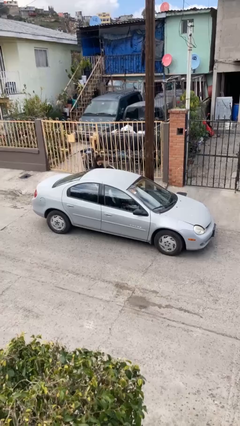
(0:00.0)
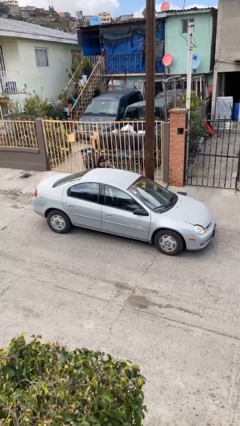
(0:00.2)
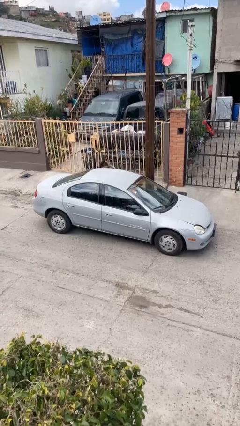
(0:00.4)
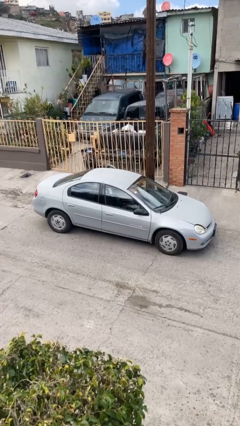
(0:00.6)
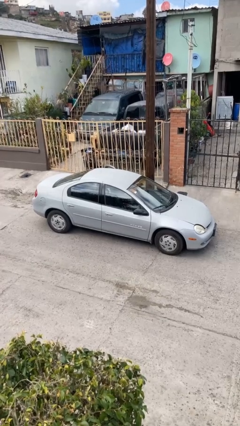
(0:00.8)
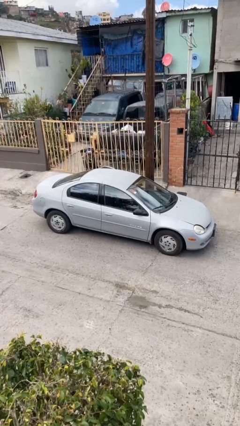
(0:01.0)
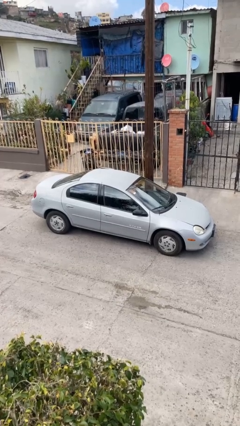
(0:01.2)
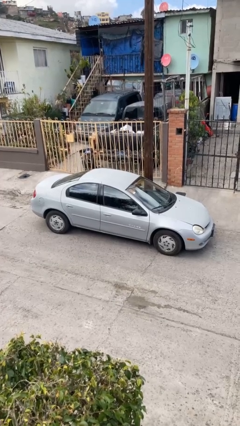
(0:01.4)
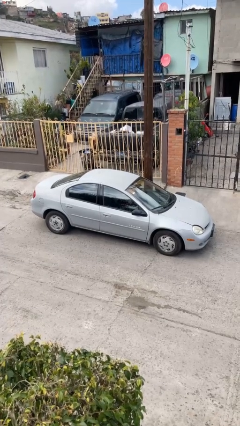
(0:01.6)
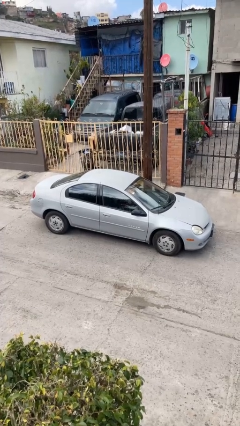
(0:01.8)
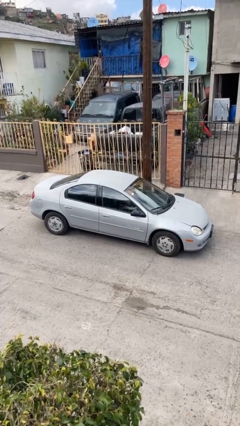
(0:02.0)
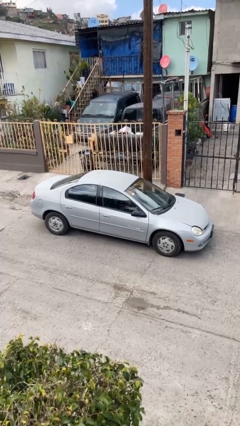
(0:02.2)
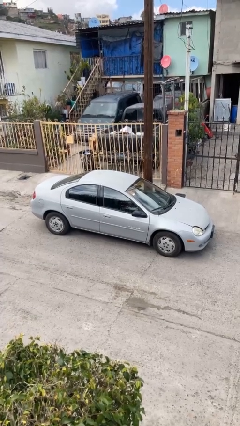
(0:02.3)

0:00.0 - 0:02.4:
car picks up person

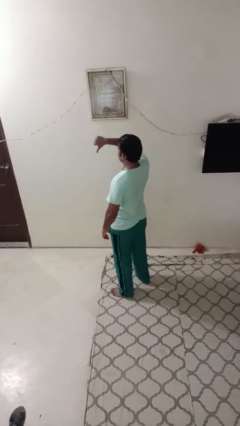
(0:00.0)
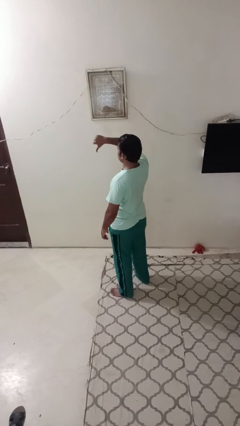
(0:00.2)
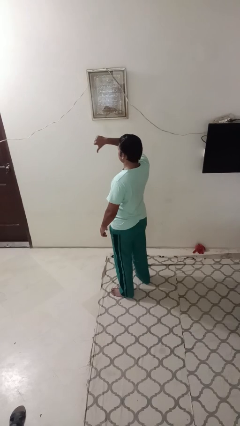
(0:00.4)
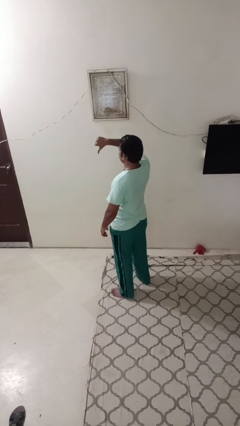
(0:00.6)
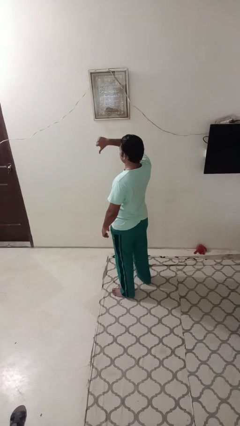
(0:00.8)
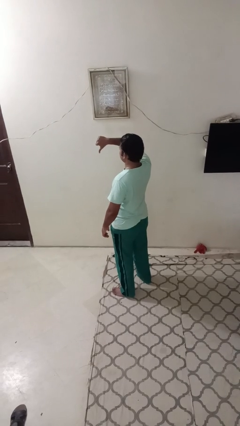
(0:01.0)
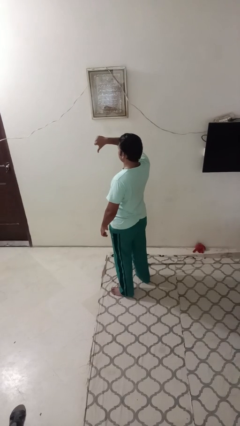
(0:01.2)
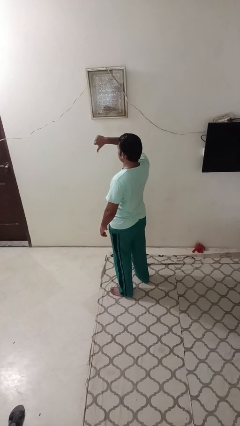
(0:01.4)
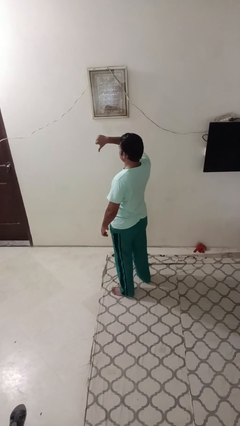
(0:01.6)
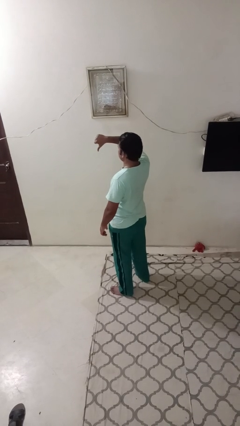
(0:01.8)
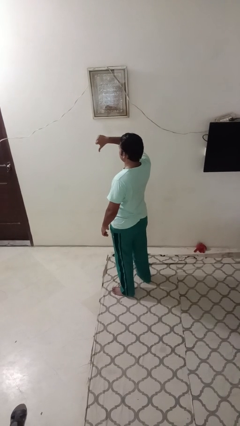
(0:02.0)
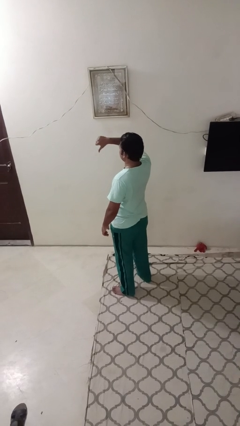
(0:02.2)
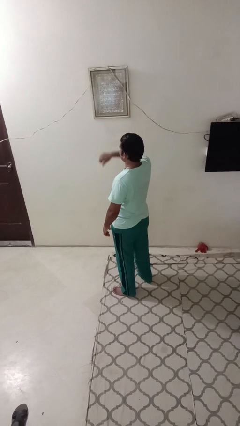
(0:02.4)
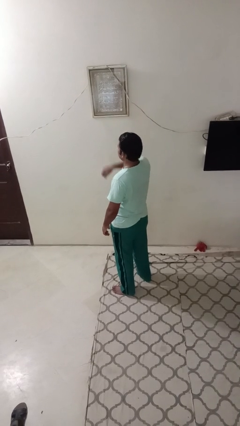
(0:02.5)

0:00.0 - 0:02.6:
person gestures thumbs down

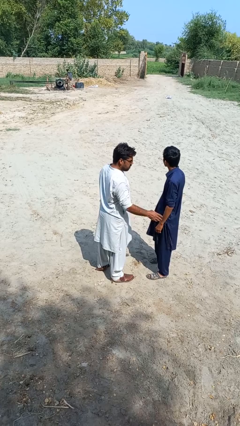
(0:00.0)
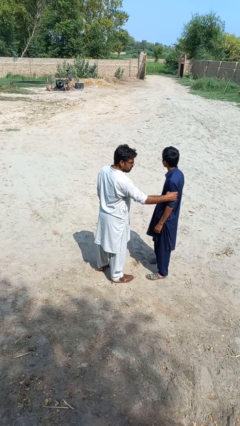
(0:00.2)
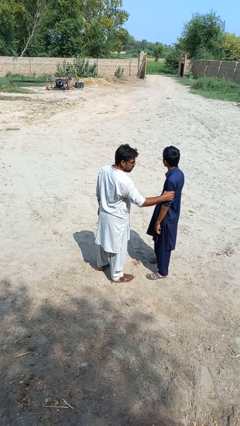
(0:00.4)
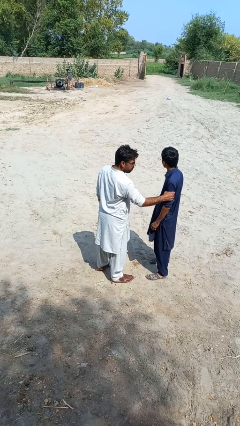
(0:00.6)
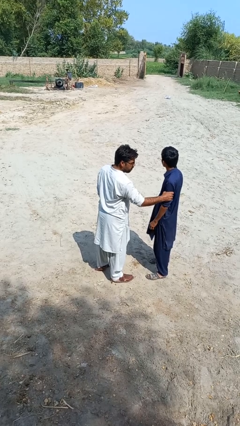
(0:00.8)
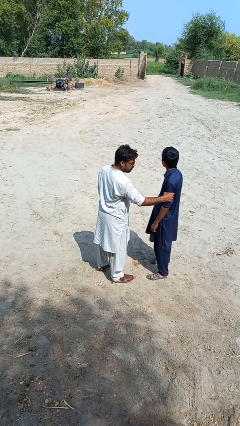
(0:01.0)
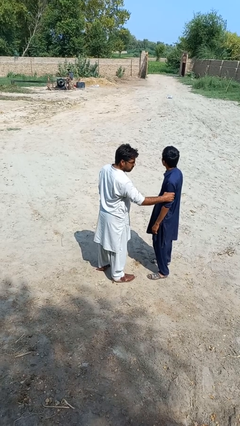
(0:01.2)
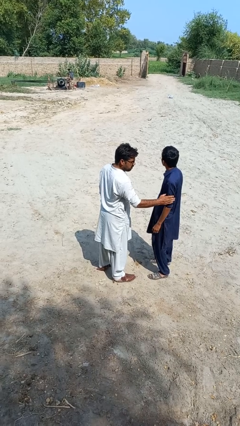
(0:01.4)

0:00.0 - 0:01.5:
person grabs person by bicep

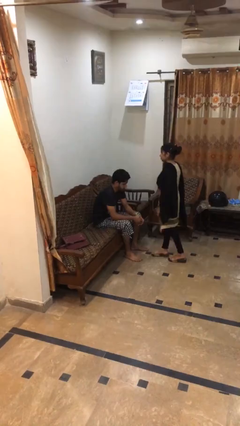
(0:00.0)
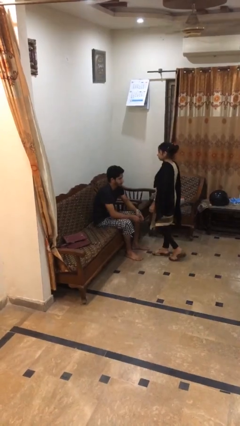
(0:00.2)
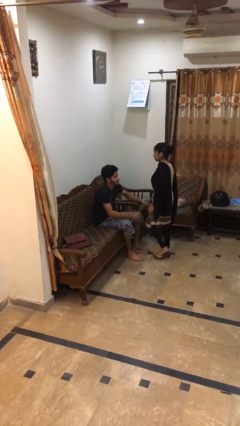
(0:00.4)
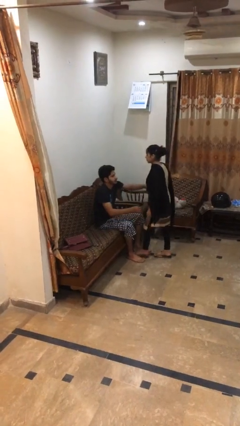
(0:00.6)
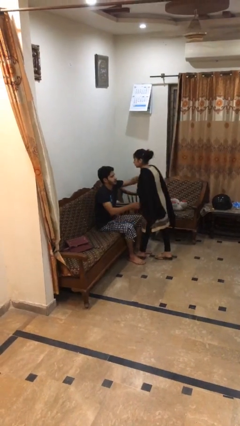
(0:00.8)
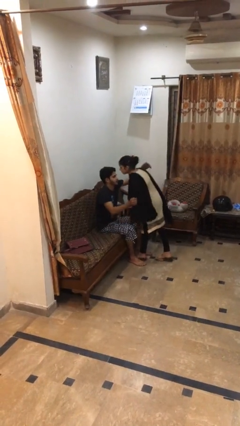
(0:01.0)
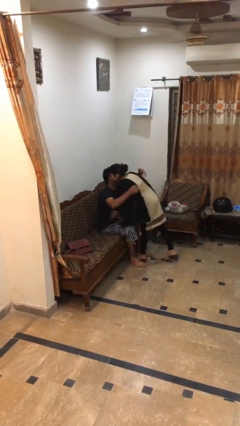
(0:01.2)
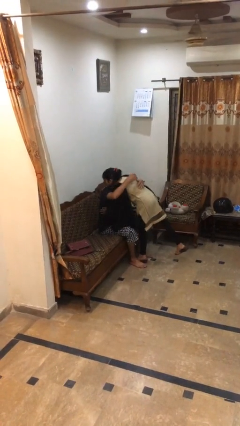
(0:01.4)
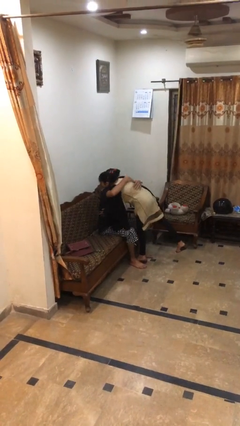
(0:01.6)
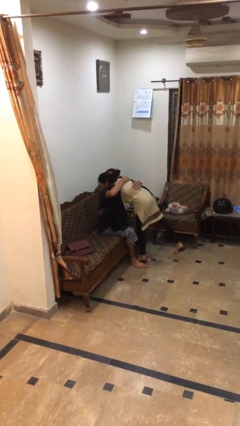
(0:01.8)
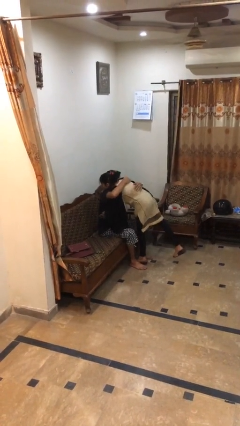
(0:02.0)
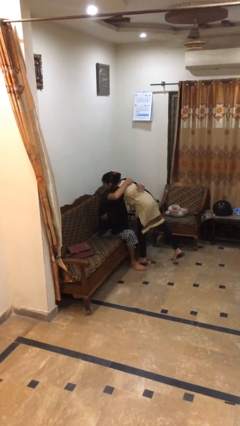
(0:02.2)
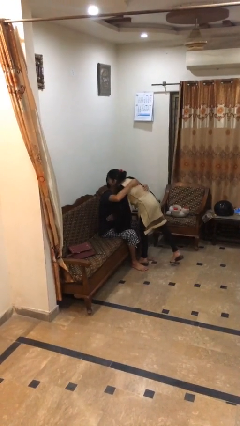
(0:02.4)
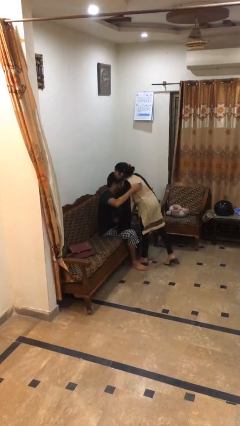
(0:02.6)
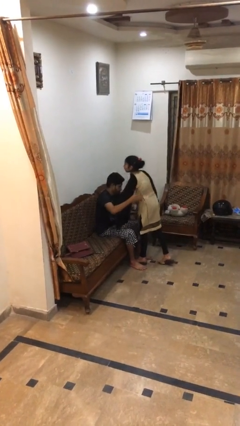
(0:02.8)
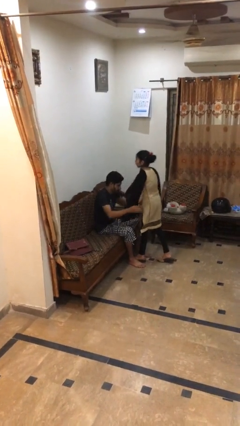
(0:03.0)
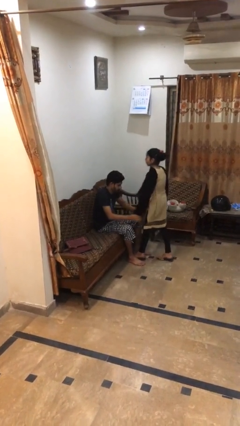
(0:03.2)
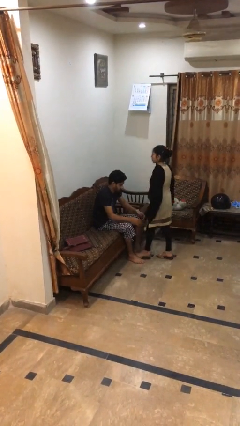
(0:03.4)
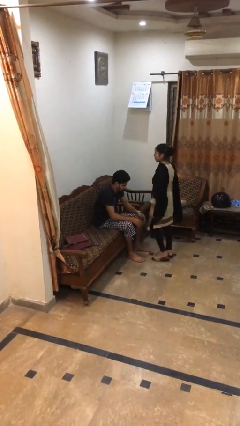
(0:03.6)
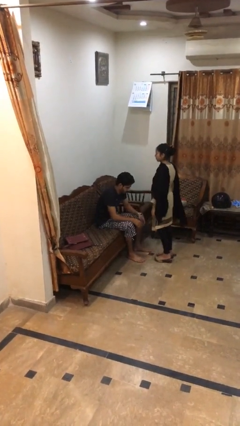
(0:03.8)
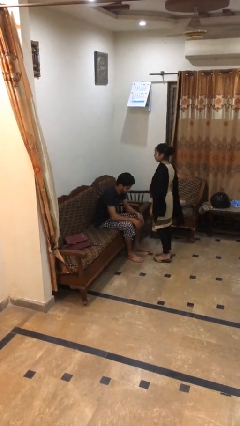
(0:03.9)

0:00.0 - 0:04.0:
person embraces person

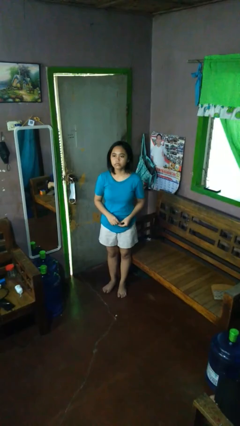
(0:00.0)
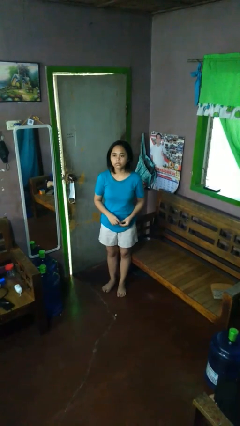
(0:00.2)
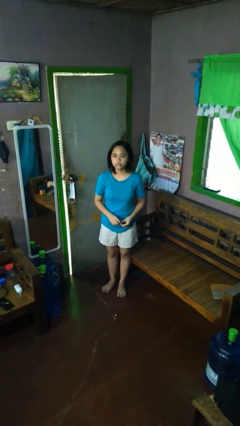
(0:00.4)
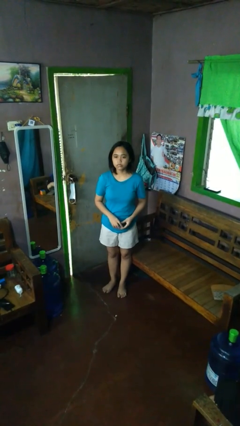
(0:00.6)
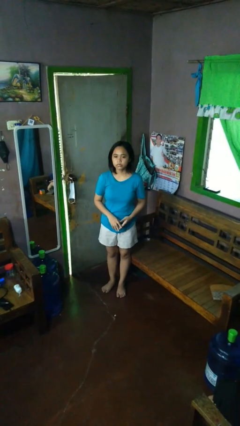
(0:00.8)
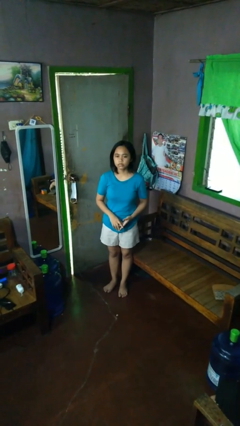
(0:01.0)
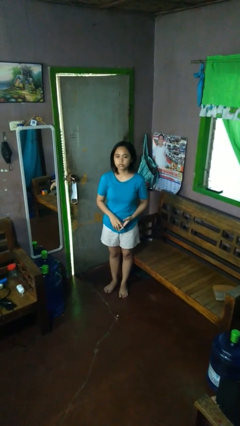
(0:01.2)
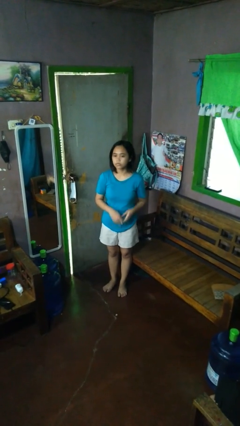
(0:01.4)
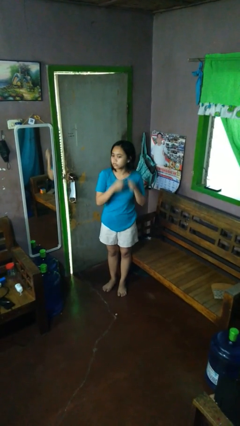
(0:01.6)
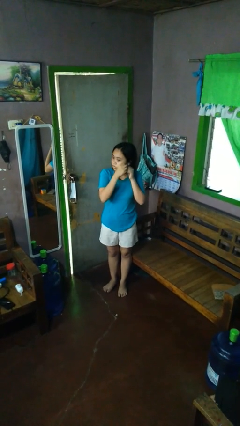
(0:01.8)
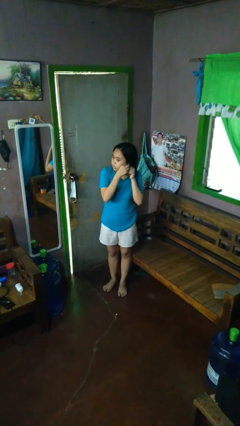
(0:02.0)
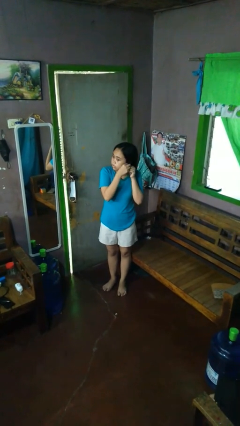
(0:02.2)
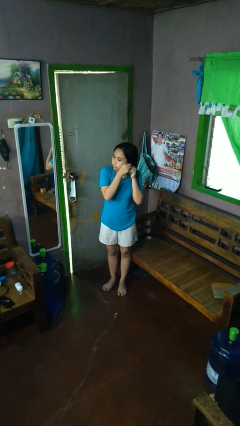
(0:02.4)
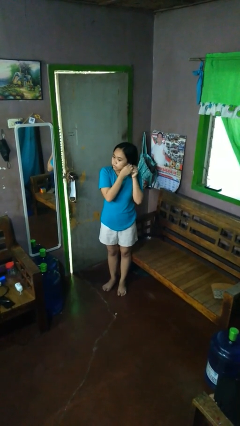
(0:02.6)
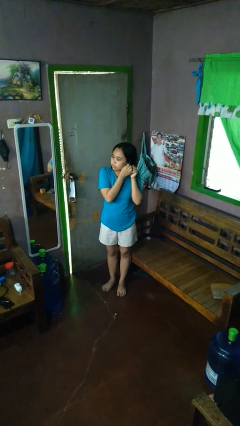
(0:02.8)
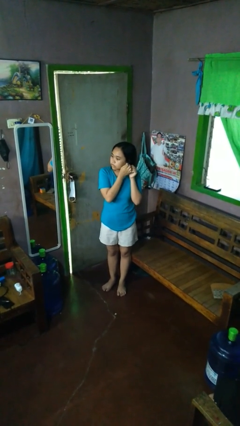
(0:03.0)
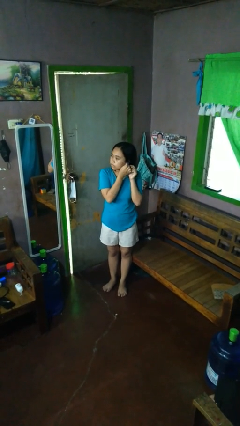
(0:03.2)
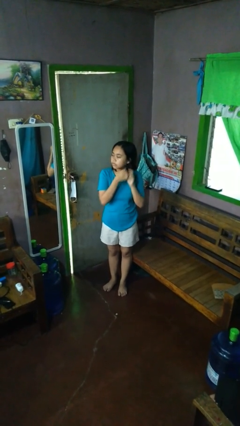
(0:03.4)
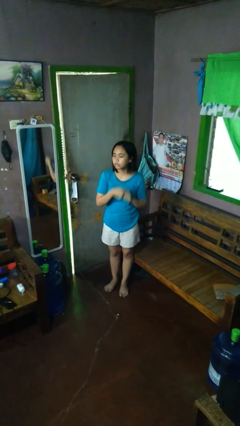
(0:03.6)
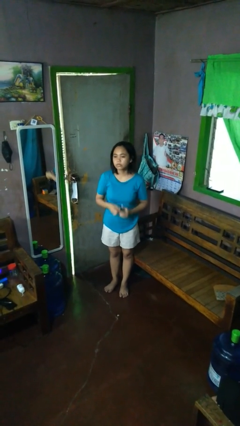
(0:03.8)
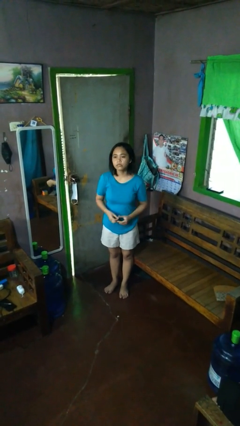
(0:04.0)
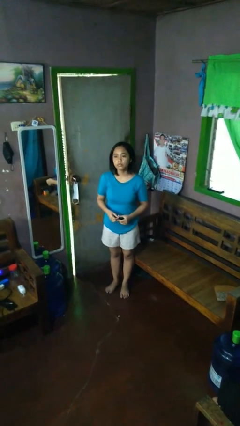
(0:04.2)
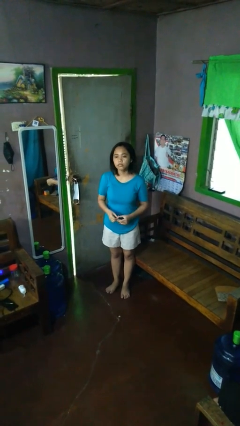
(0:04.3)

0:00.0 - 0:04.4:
person takes off earrings

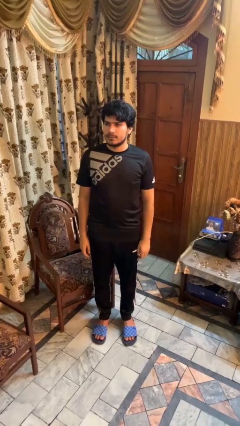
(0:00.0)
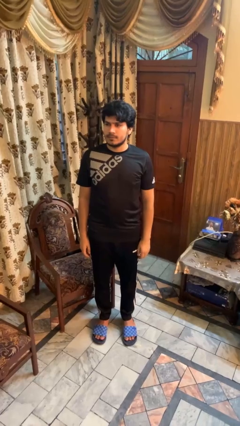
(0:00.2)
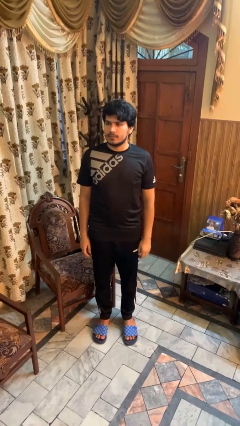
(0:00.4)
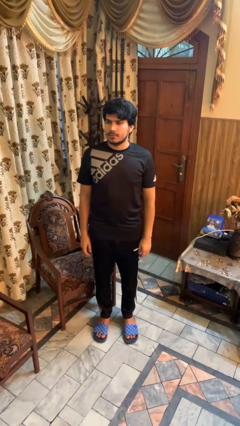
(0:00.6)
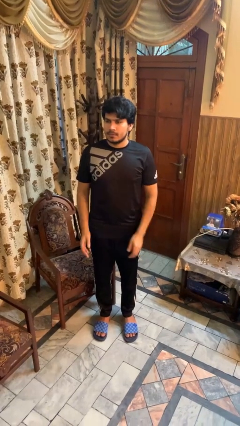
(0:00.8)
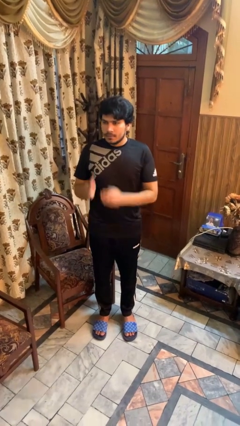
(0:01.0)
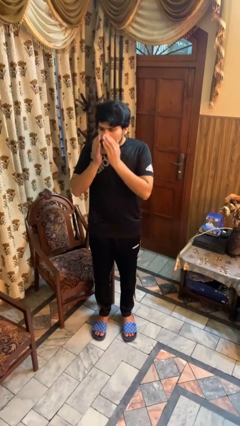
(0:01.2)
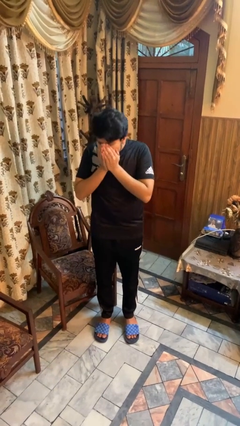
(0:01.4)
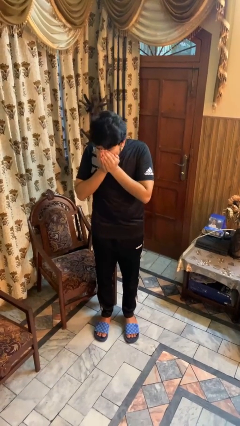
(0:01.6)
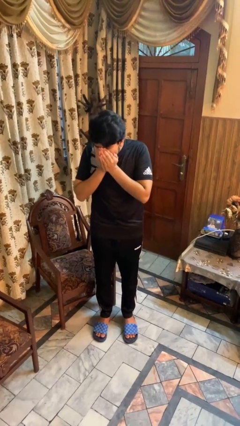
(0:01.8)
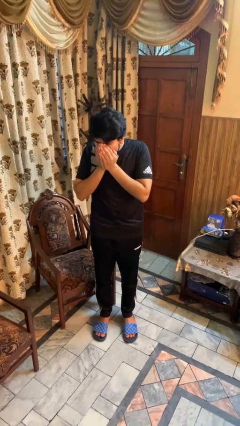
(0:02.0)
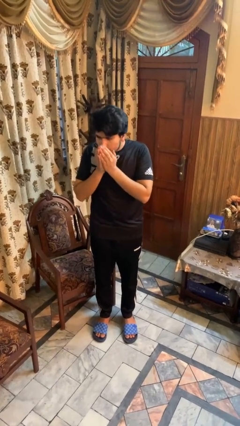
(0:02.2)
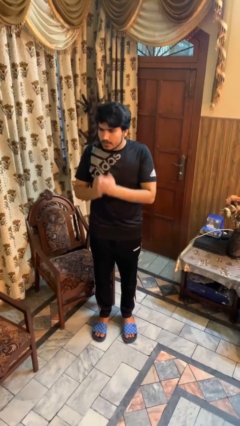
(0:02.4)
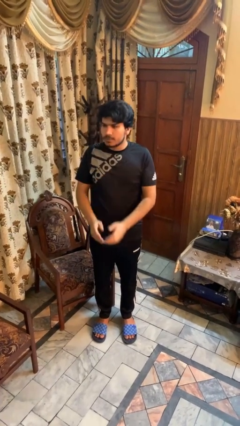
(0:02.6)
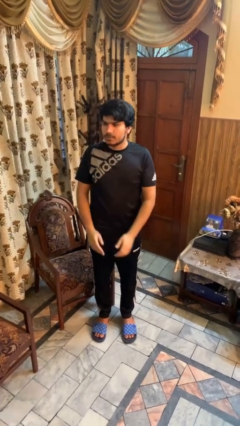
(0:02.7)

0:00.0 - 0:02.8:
person sneezes into hand
